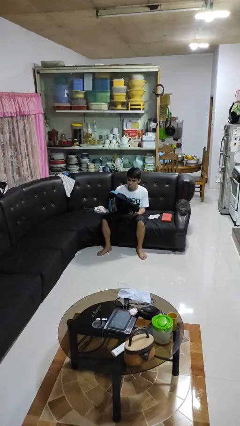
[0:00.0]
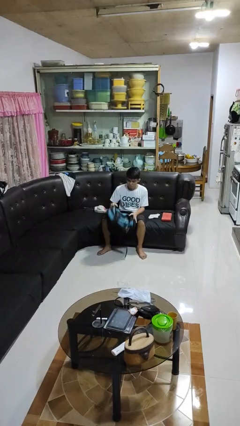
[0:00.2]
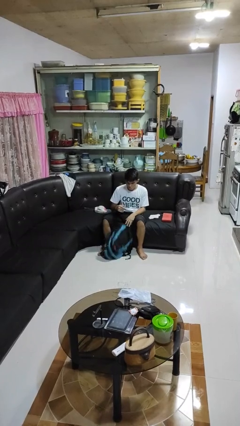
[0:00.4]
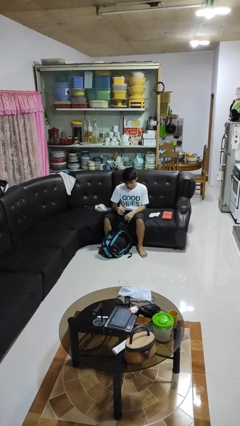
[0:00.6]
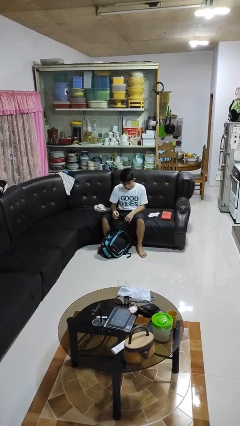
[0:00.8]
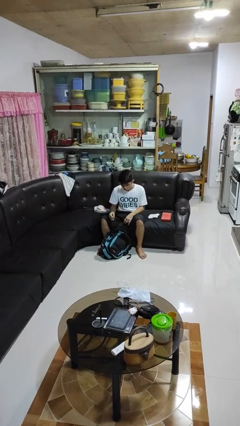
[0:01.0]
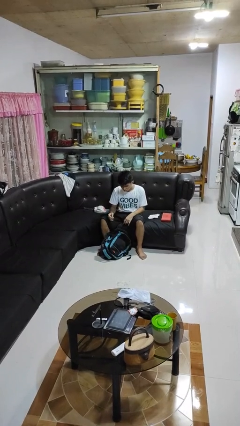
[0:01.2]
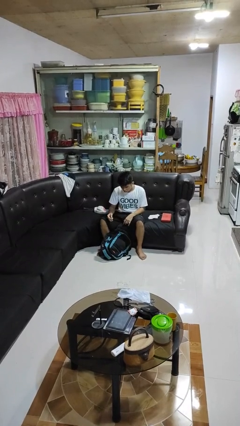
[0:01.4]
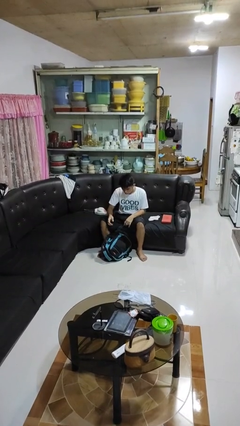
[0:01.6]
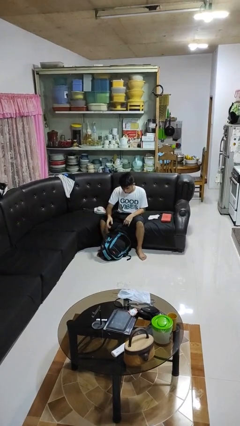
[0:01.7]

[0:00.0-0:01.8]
person drops object

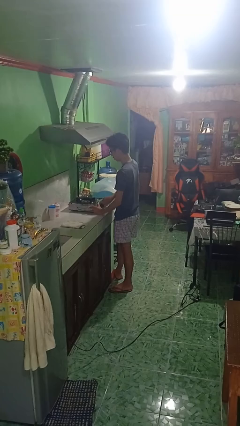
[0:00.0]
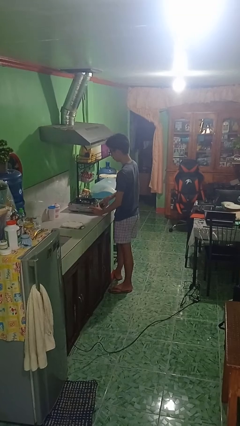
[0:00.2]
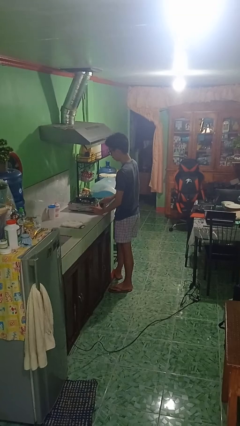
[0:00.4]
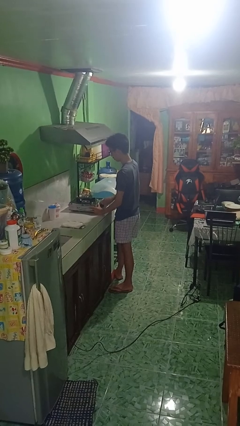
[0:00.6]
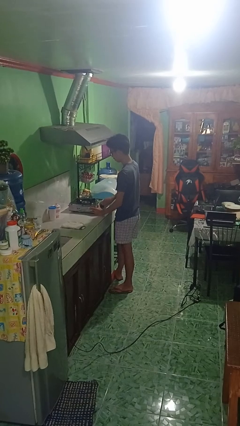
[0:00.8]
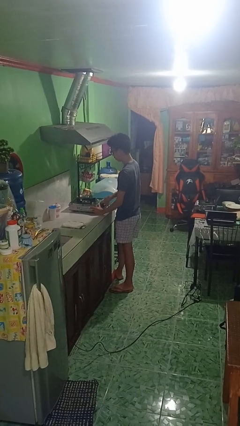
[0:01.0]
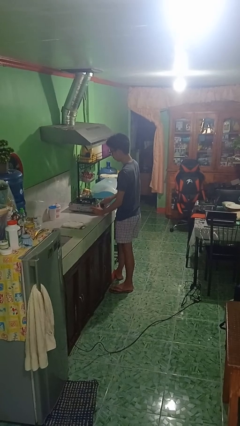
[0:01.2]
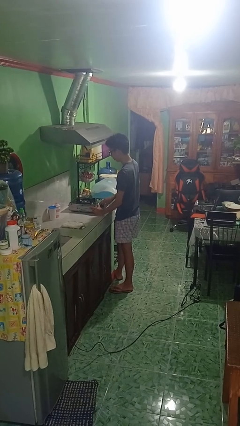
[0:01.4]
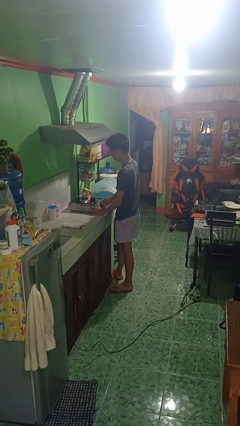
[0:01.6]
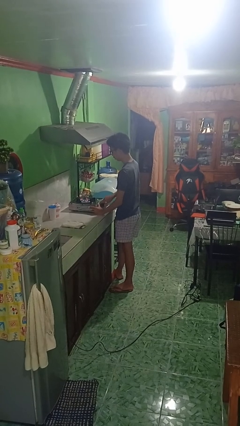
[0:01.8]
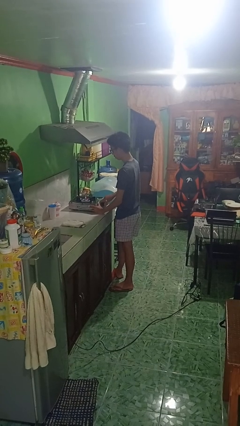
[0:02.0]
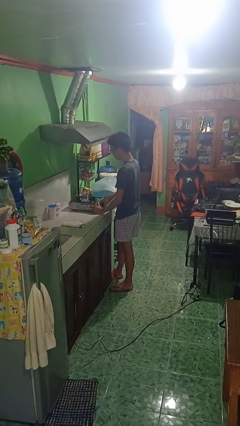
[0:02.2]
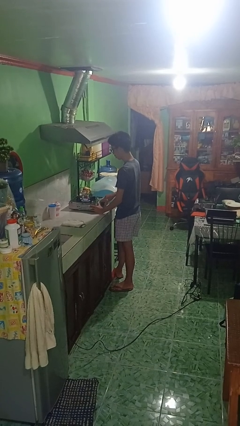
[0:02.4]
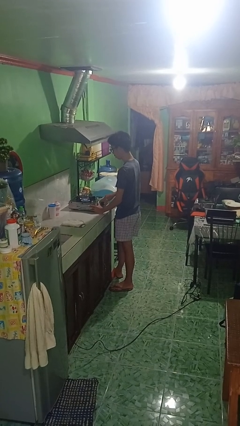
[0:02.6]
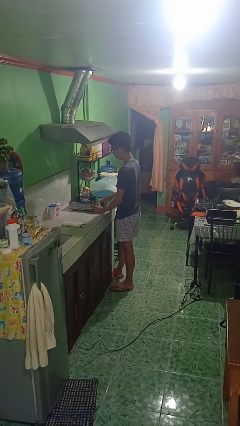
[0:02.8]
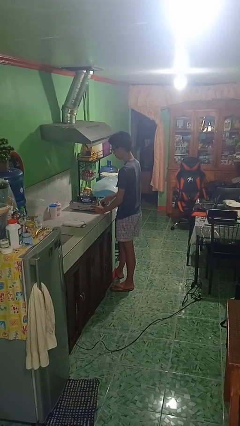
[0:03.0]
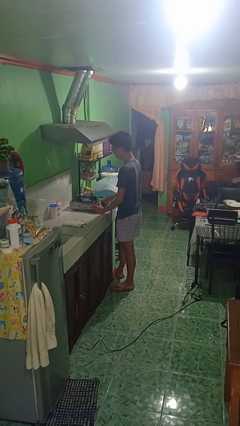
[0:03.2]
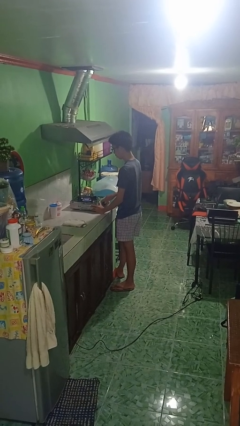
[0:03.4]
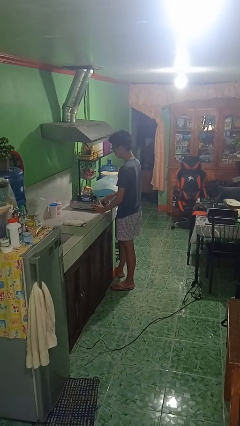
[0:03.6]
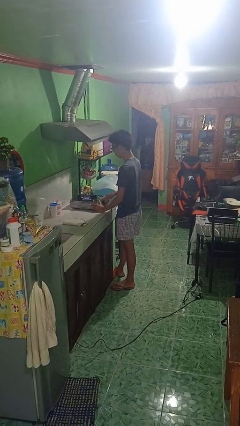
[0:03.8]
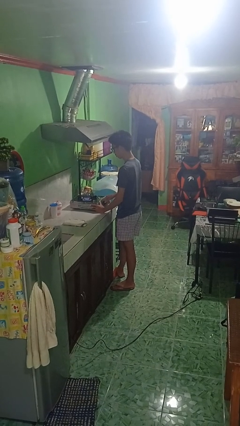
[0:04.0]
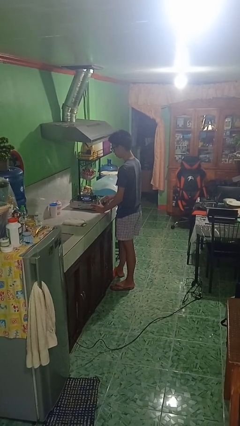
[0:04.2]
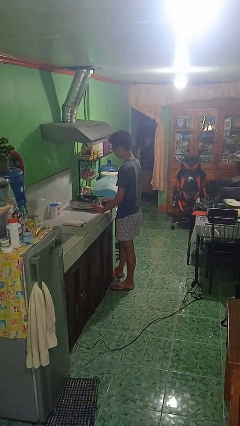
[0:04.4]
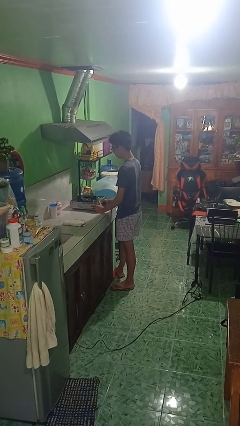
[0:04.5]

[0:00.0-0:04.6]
person turns on stovetop

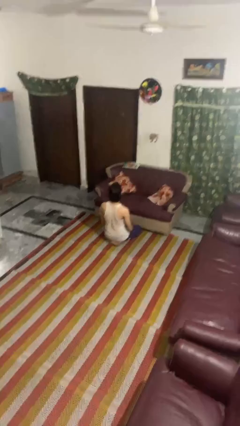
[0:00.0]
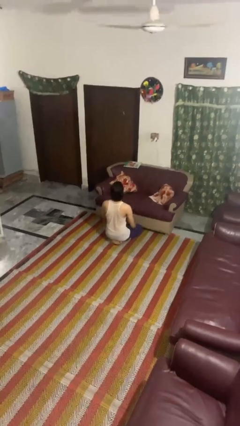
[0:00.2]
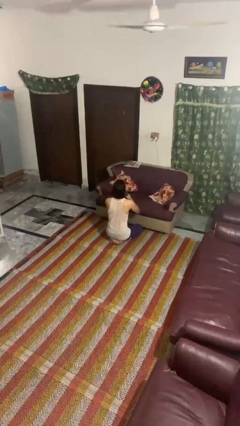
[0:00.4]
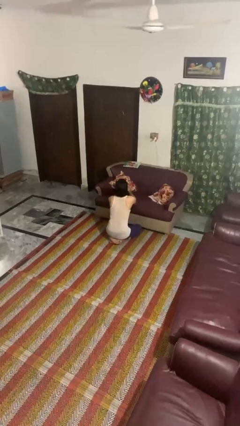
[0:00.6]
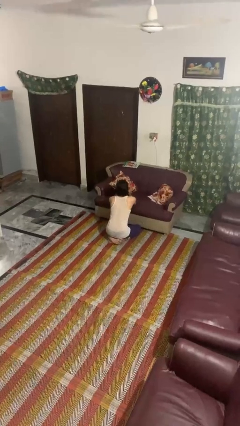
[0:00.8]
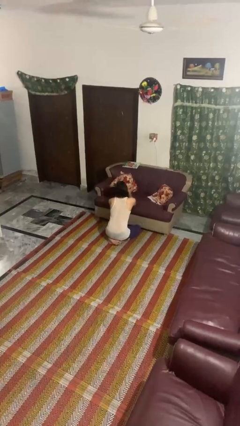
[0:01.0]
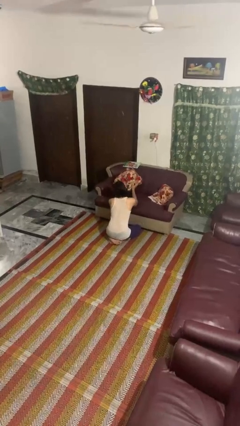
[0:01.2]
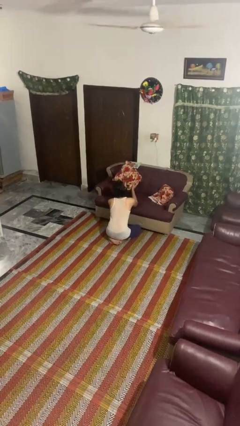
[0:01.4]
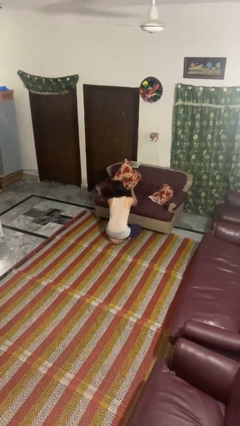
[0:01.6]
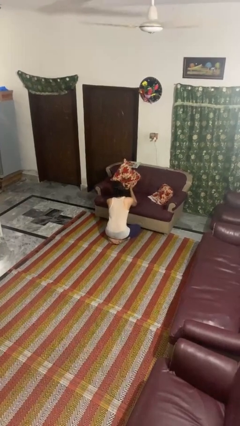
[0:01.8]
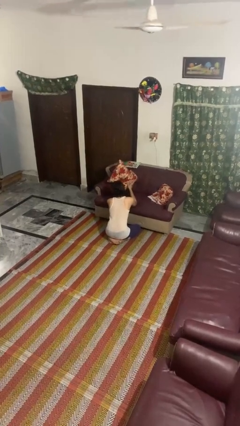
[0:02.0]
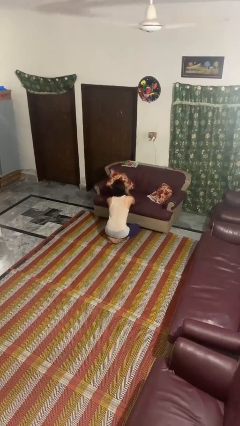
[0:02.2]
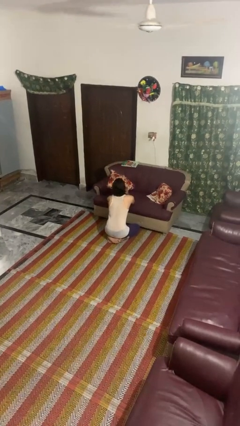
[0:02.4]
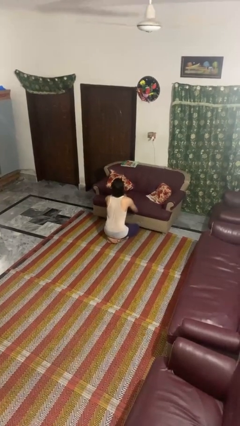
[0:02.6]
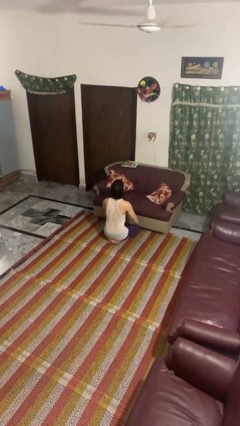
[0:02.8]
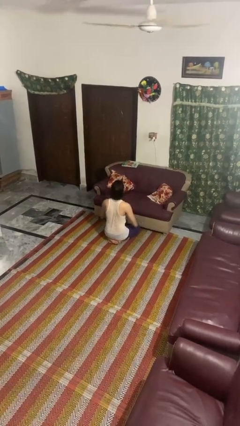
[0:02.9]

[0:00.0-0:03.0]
person searches in couch

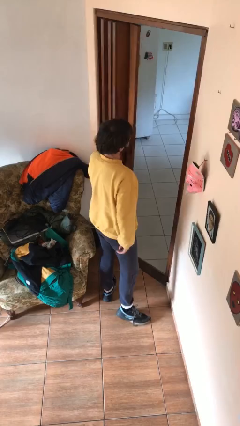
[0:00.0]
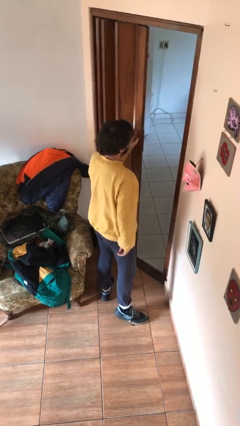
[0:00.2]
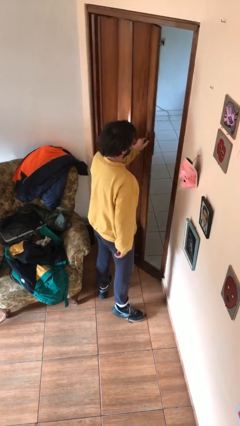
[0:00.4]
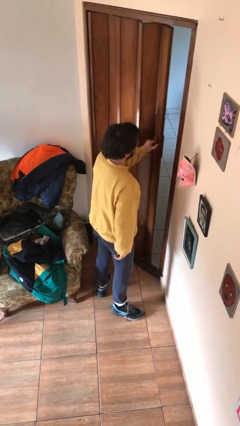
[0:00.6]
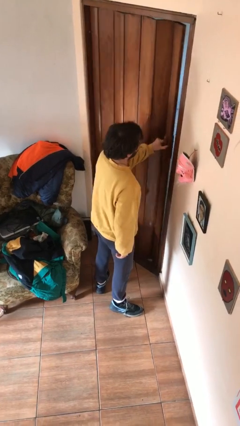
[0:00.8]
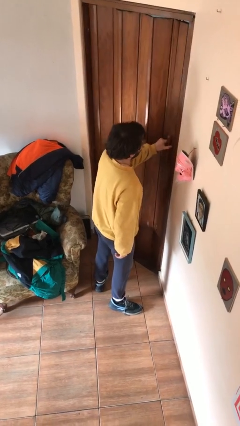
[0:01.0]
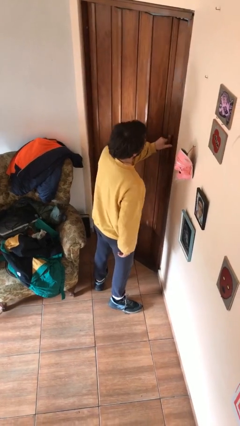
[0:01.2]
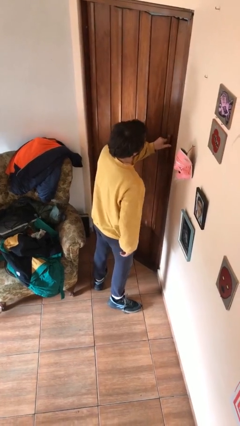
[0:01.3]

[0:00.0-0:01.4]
person closes sliding door

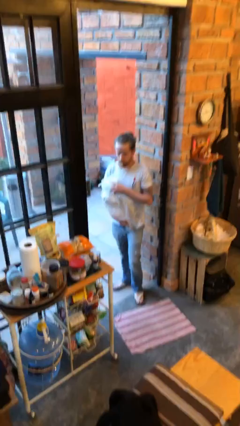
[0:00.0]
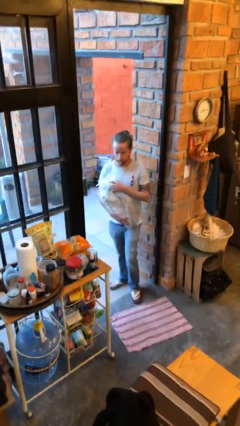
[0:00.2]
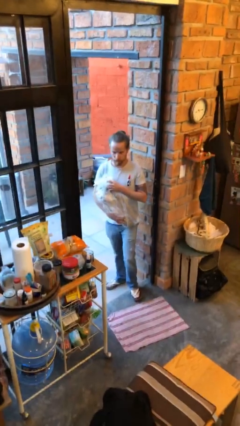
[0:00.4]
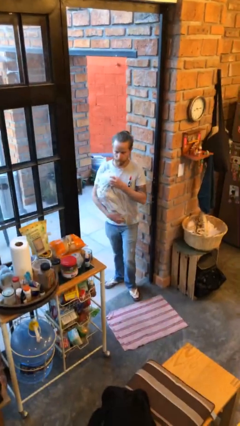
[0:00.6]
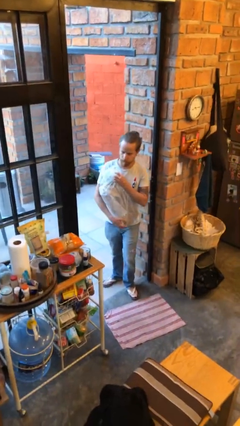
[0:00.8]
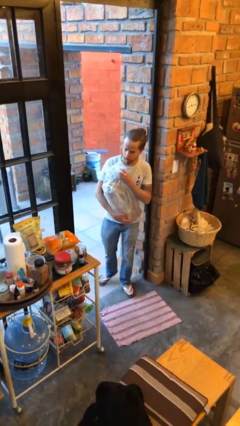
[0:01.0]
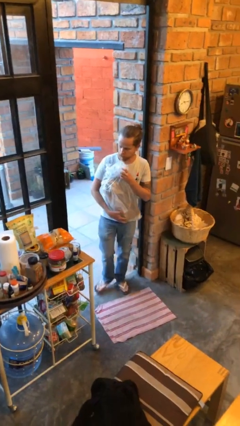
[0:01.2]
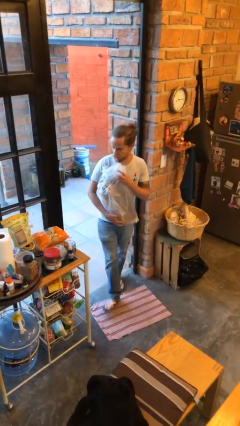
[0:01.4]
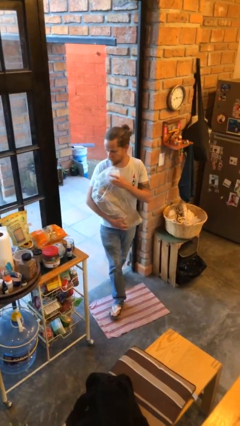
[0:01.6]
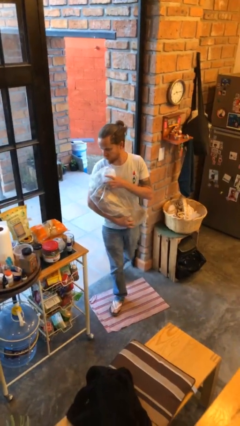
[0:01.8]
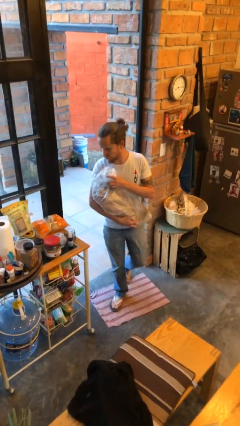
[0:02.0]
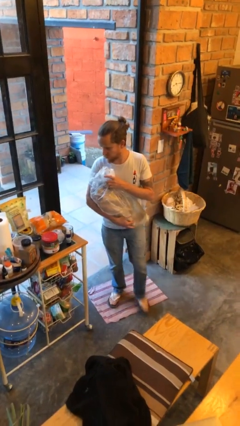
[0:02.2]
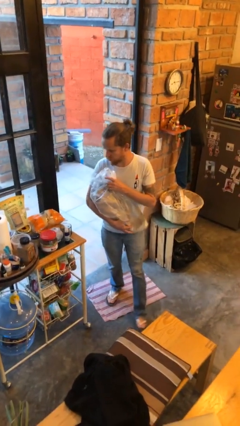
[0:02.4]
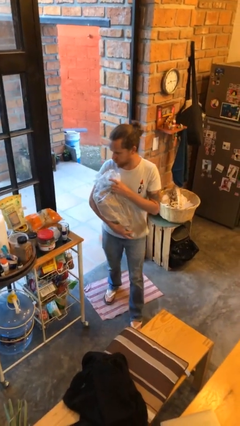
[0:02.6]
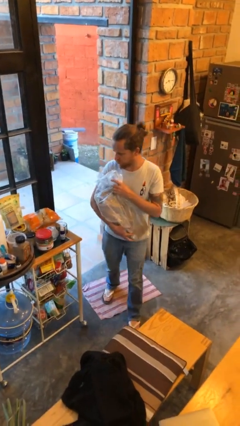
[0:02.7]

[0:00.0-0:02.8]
person carries groceries

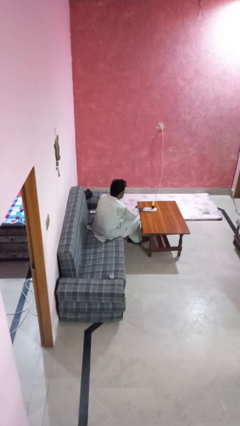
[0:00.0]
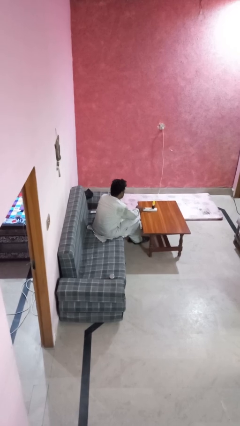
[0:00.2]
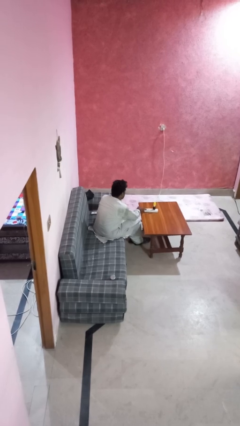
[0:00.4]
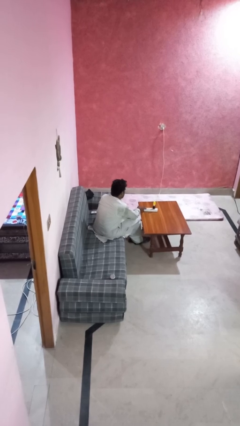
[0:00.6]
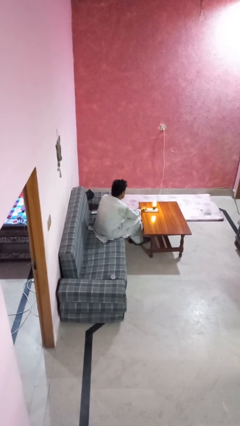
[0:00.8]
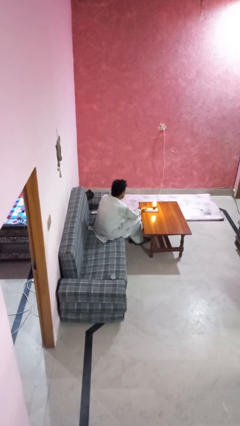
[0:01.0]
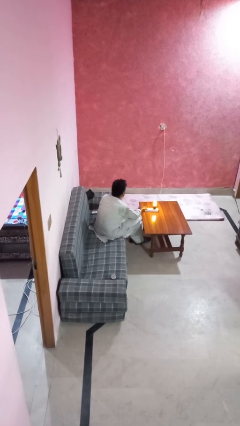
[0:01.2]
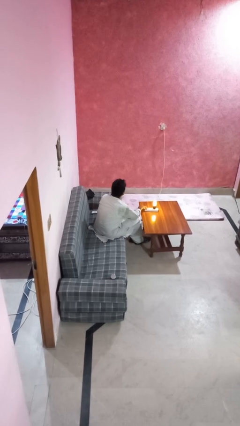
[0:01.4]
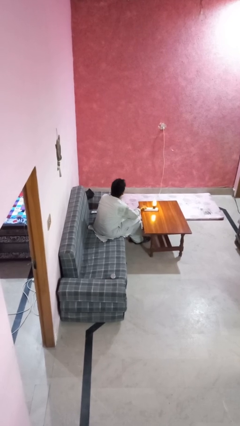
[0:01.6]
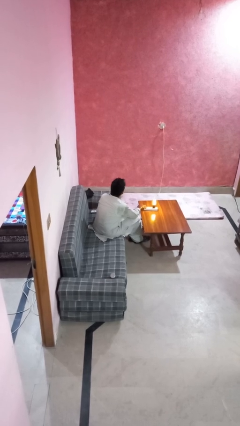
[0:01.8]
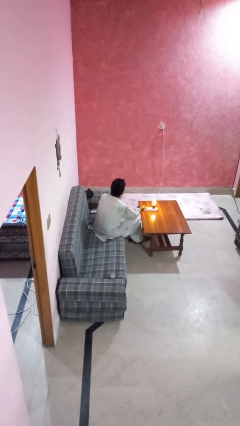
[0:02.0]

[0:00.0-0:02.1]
person turns on lamp

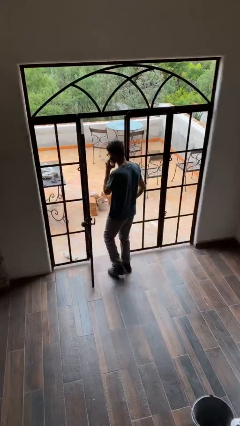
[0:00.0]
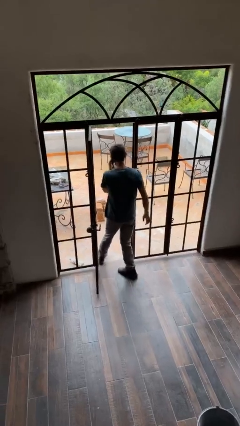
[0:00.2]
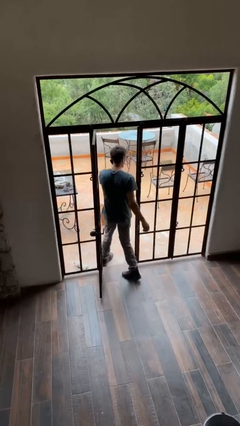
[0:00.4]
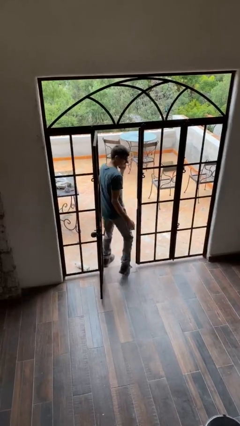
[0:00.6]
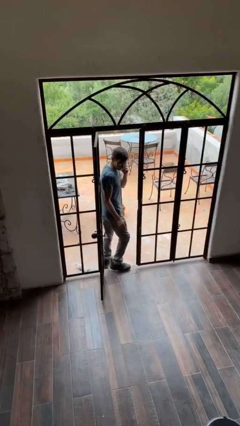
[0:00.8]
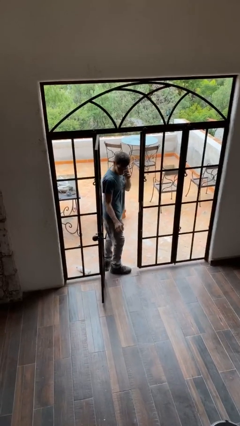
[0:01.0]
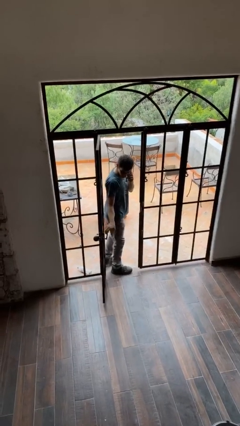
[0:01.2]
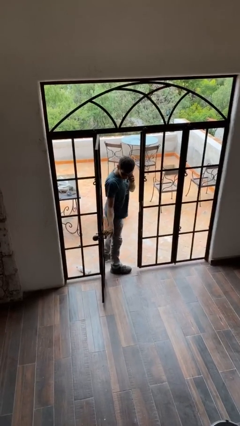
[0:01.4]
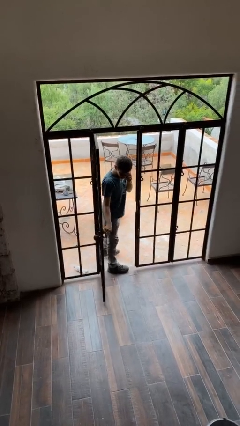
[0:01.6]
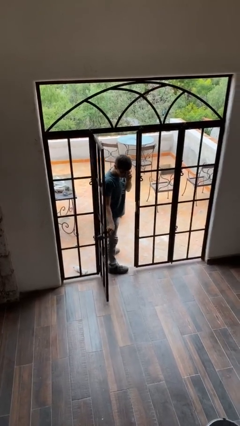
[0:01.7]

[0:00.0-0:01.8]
person exits scene through structure
